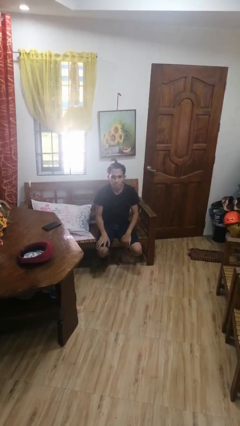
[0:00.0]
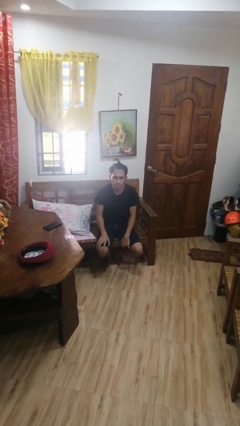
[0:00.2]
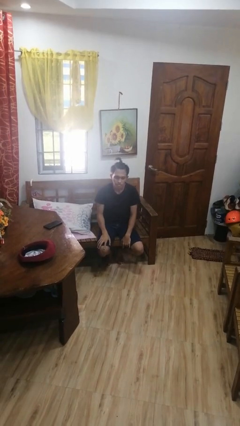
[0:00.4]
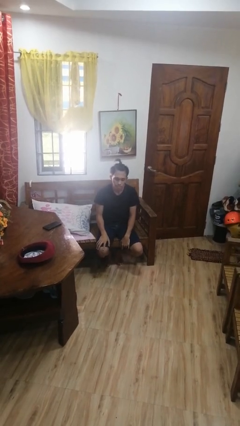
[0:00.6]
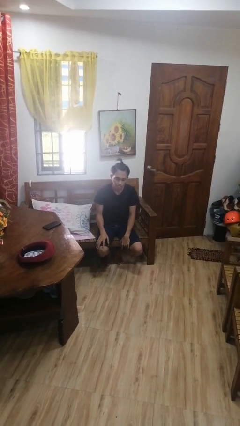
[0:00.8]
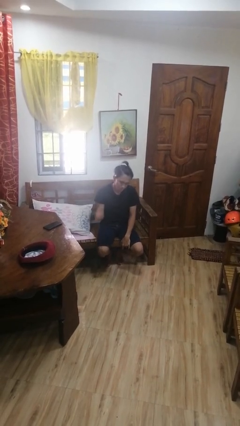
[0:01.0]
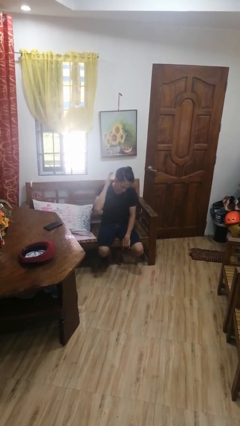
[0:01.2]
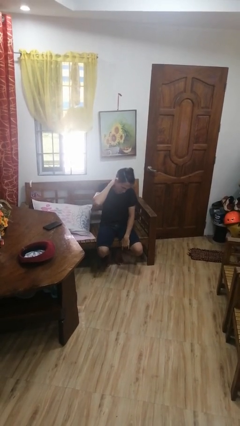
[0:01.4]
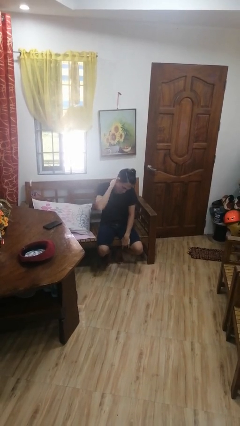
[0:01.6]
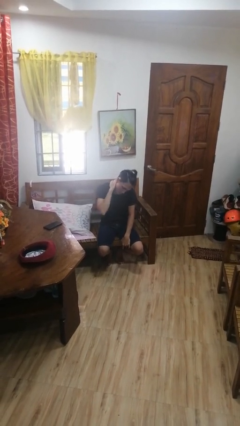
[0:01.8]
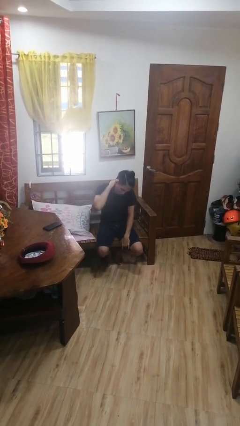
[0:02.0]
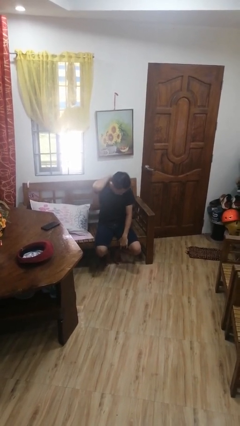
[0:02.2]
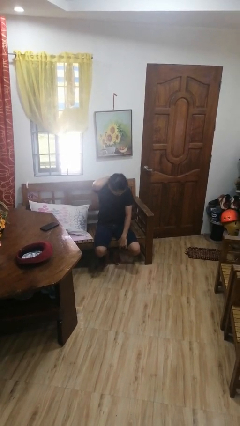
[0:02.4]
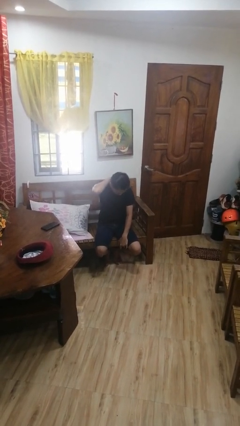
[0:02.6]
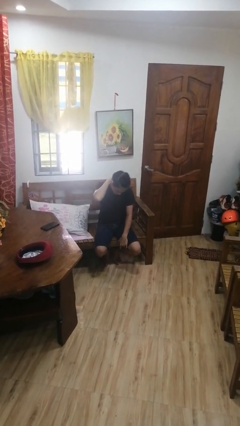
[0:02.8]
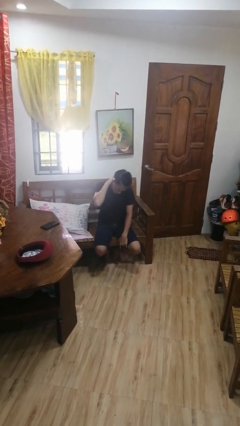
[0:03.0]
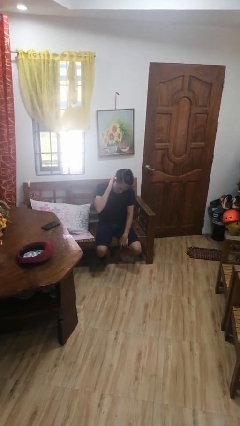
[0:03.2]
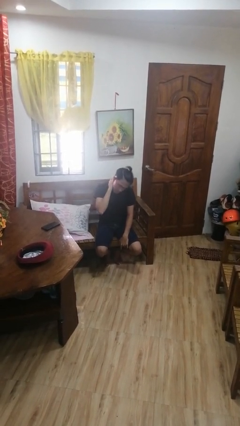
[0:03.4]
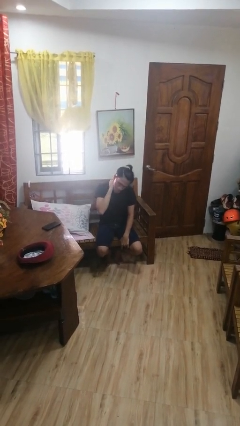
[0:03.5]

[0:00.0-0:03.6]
person rubs neck

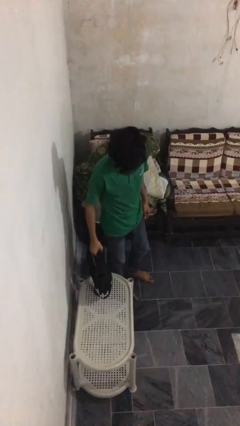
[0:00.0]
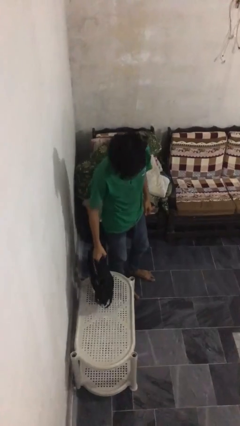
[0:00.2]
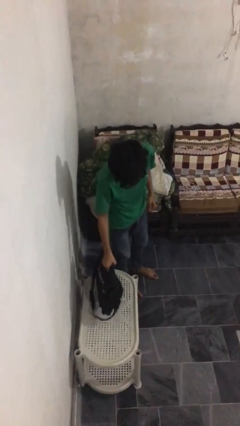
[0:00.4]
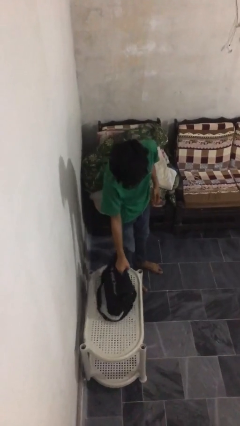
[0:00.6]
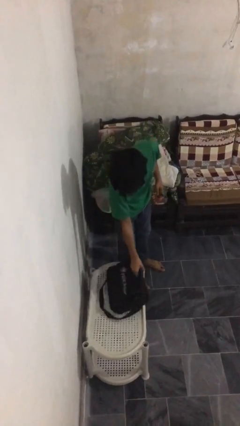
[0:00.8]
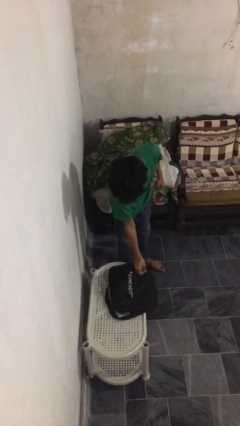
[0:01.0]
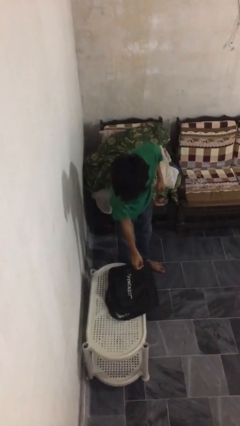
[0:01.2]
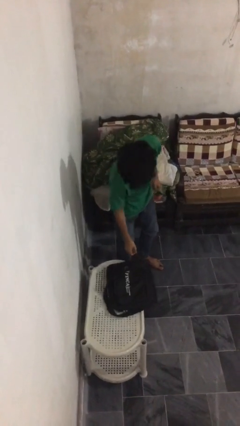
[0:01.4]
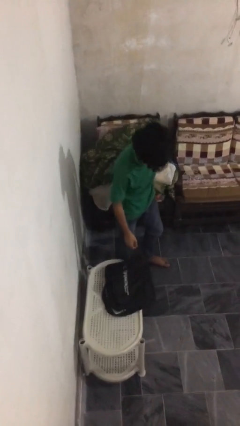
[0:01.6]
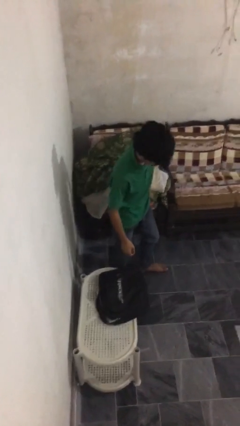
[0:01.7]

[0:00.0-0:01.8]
person puts down object on table

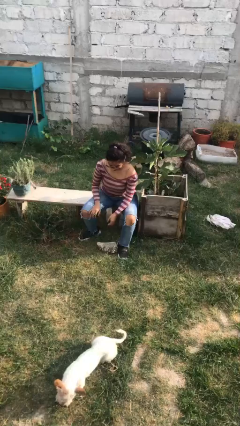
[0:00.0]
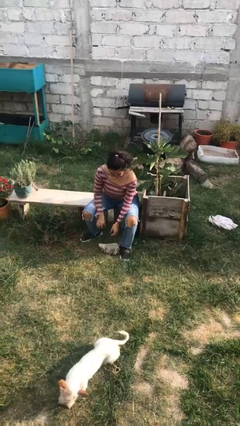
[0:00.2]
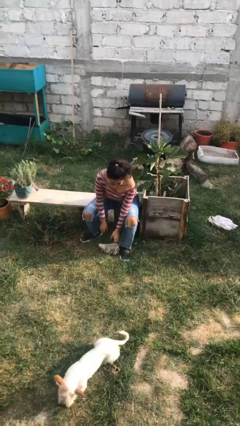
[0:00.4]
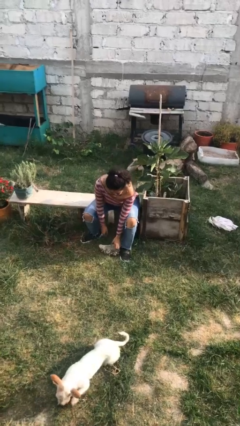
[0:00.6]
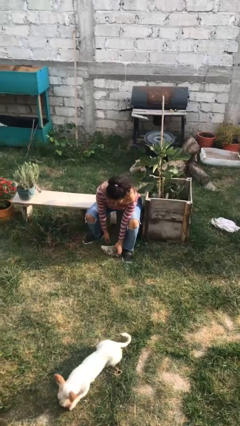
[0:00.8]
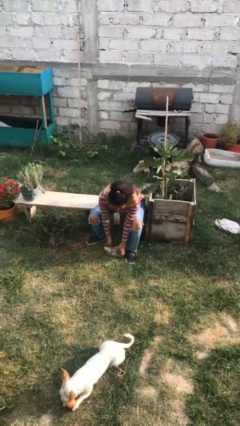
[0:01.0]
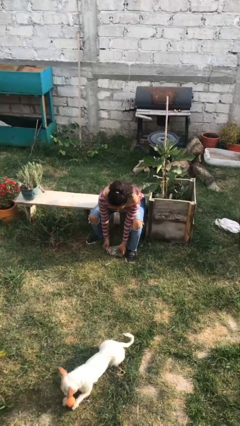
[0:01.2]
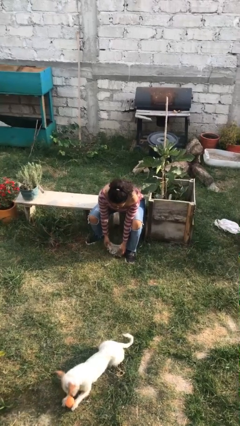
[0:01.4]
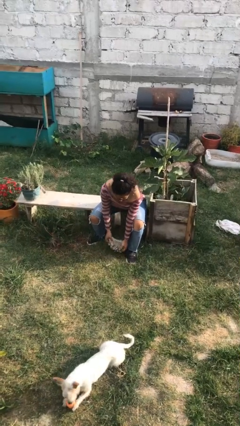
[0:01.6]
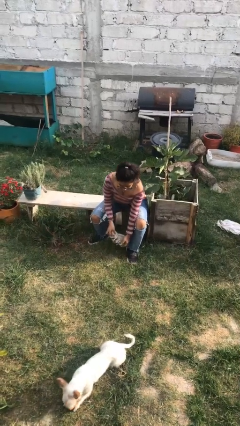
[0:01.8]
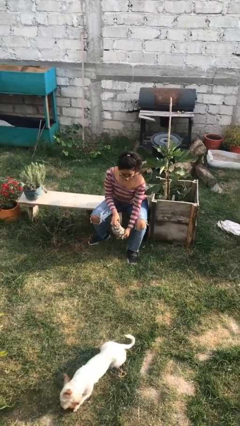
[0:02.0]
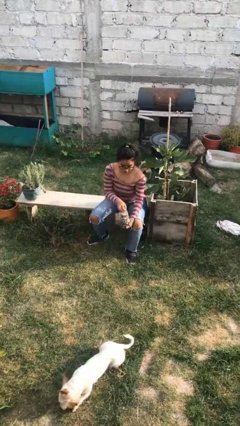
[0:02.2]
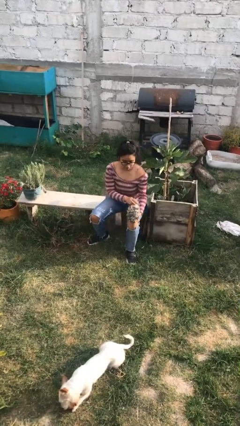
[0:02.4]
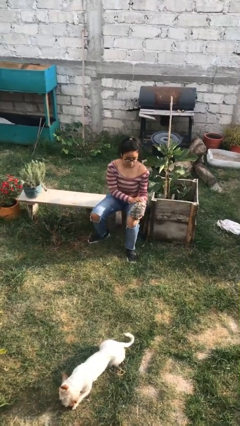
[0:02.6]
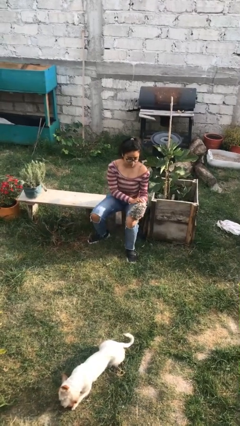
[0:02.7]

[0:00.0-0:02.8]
person picks up object from floor

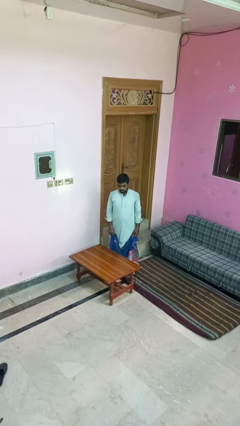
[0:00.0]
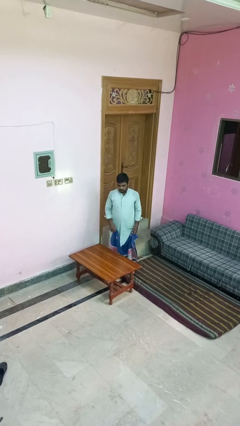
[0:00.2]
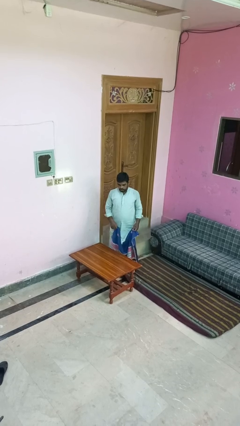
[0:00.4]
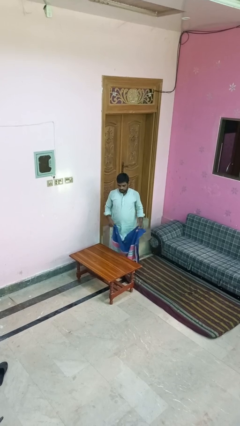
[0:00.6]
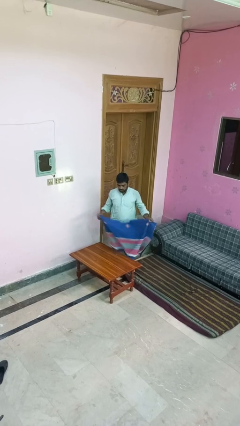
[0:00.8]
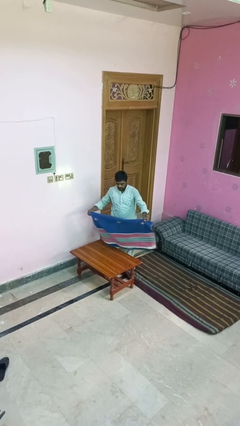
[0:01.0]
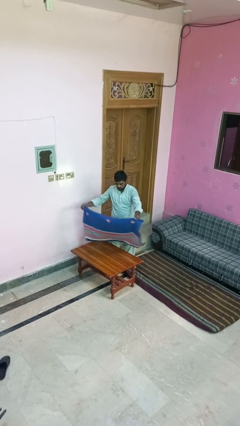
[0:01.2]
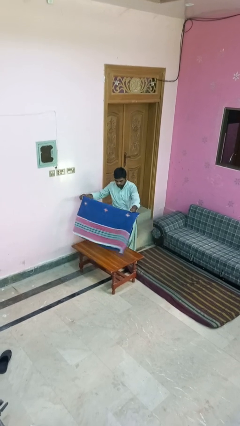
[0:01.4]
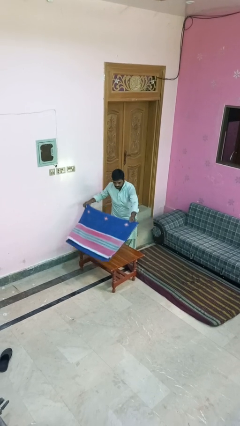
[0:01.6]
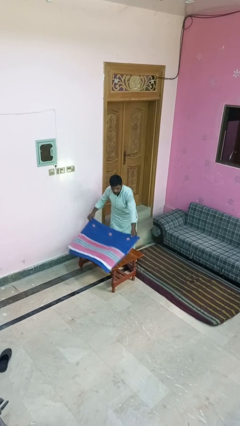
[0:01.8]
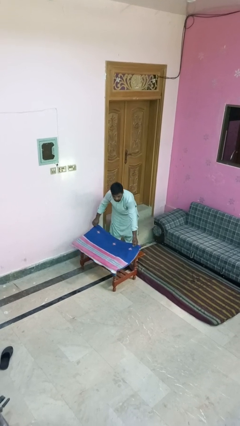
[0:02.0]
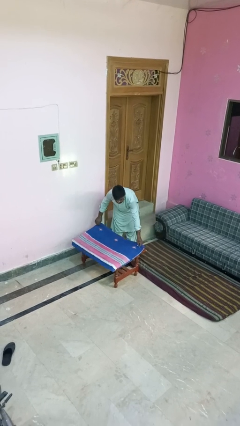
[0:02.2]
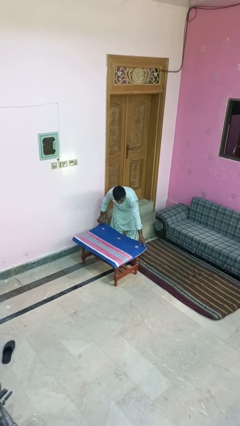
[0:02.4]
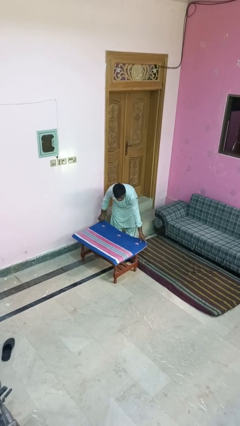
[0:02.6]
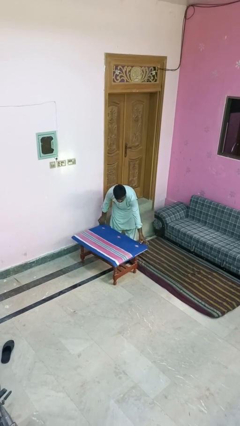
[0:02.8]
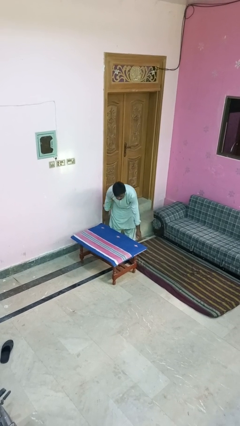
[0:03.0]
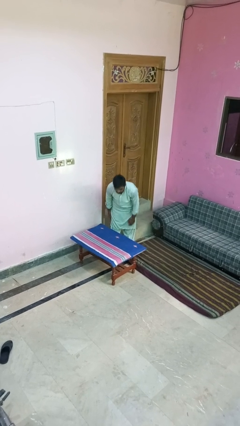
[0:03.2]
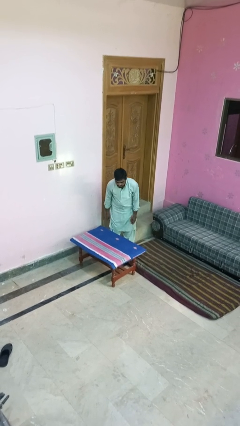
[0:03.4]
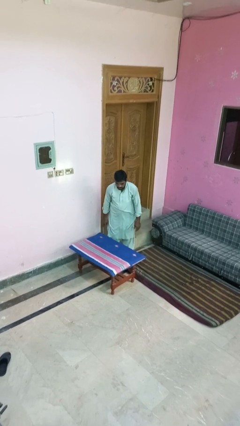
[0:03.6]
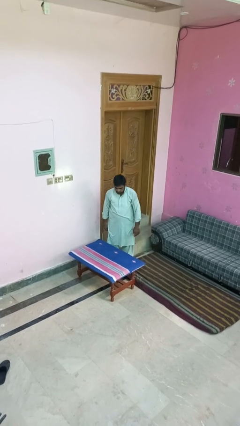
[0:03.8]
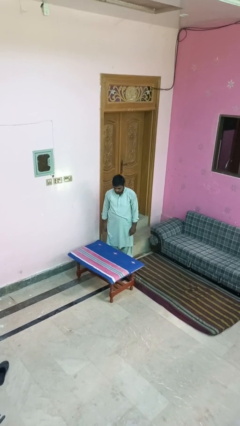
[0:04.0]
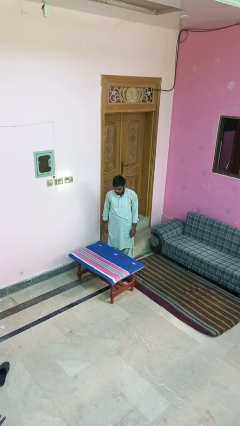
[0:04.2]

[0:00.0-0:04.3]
person spreads tablecloth

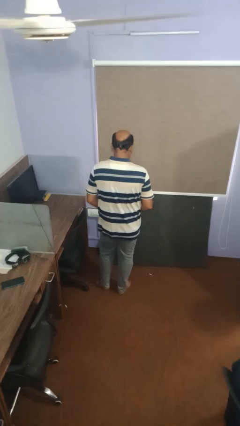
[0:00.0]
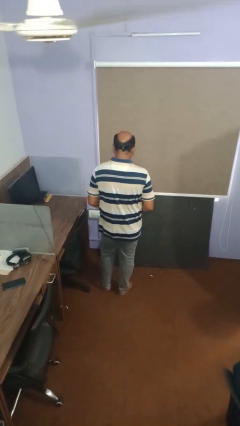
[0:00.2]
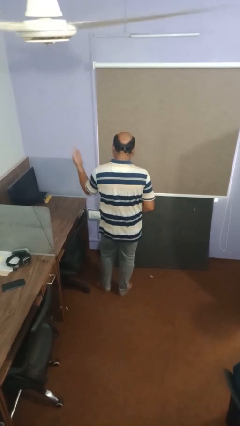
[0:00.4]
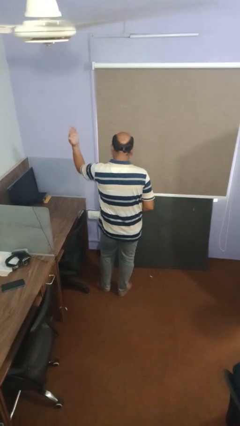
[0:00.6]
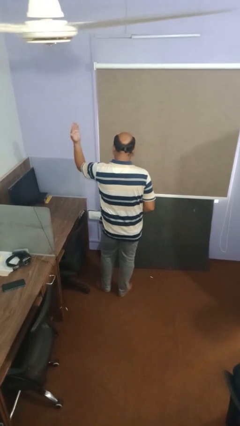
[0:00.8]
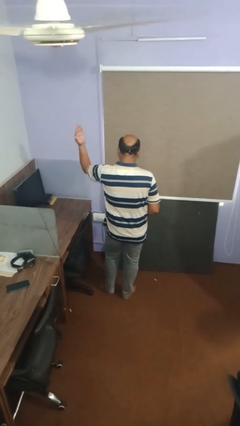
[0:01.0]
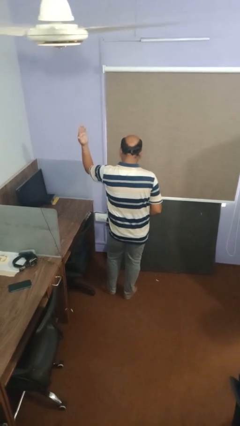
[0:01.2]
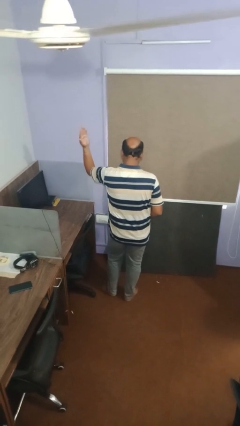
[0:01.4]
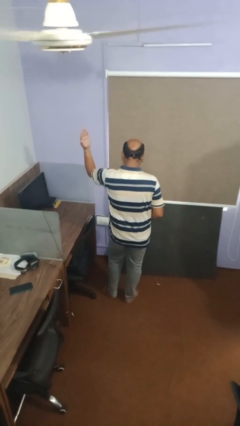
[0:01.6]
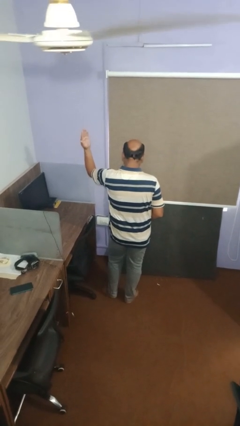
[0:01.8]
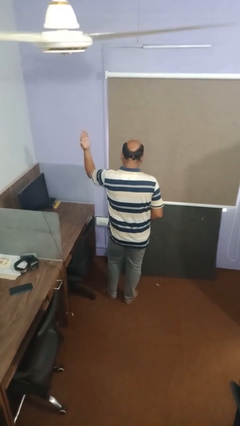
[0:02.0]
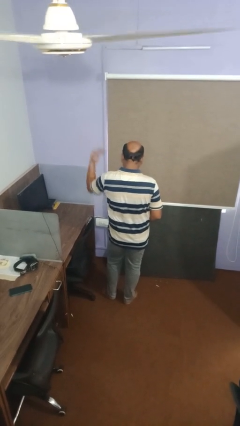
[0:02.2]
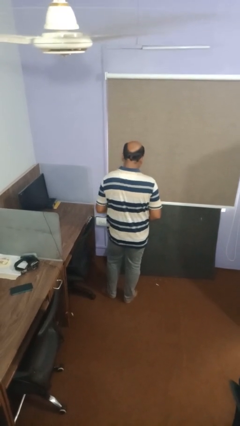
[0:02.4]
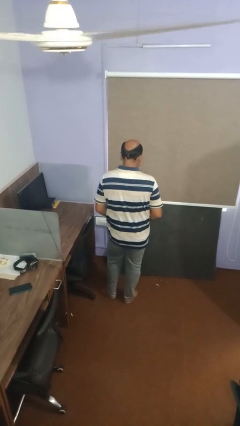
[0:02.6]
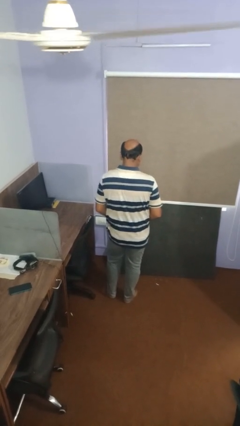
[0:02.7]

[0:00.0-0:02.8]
person gestures swipe left

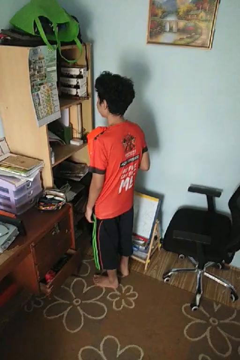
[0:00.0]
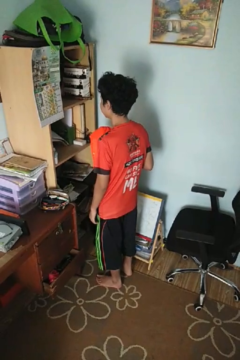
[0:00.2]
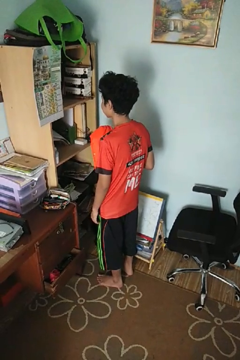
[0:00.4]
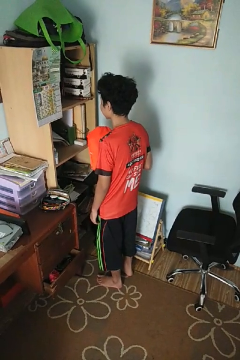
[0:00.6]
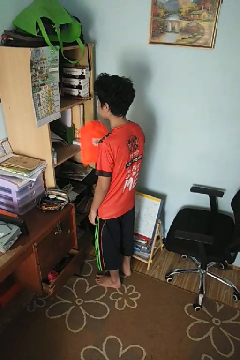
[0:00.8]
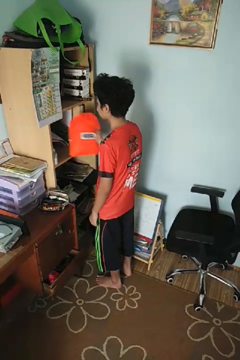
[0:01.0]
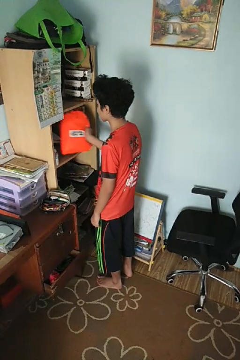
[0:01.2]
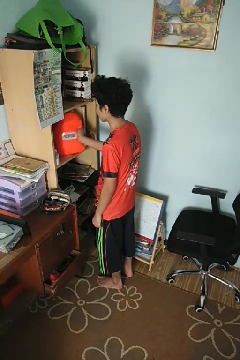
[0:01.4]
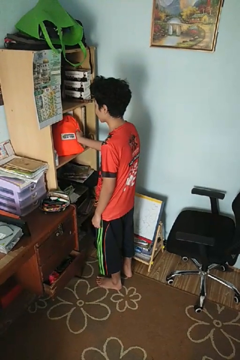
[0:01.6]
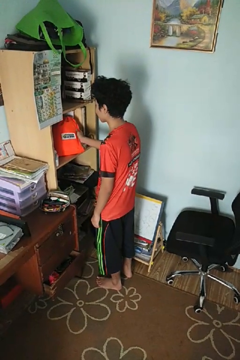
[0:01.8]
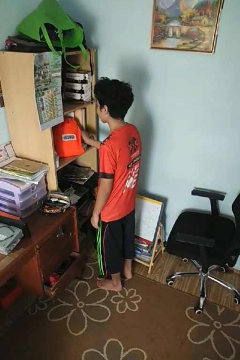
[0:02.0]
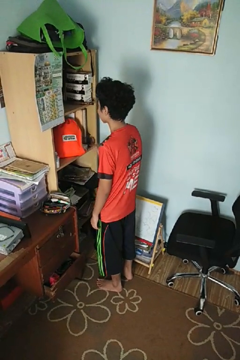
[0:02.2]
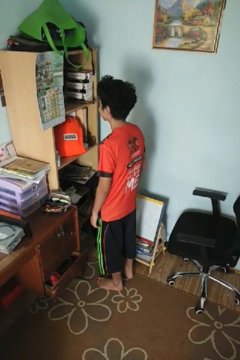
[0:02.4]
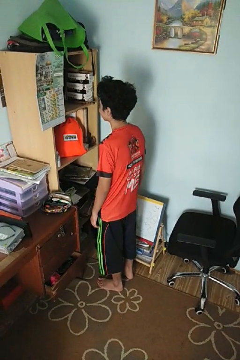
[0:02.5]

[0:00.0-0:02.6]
person puts down object into cabinet
